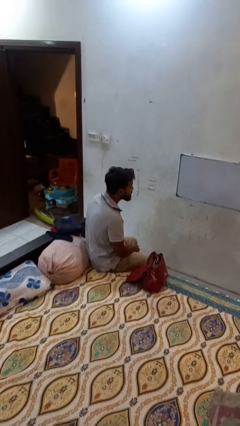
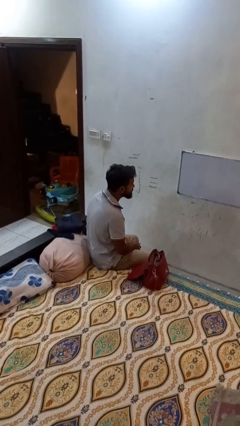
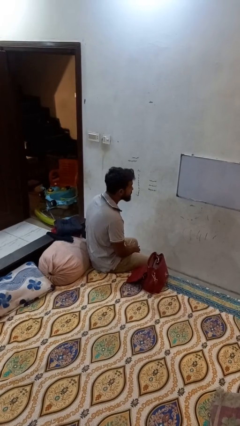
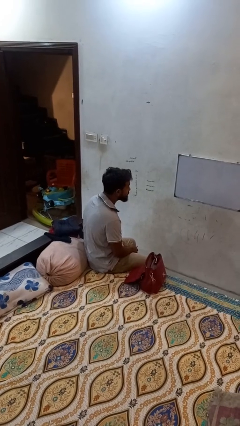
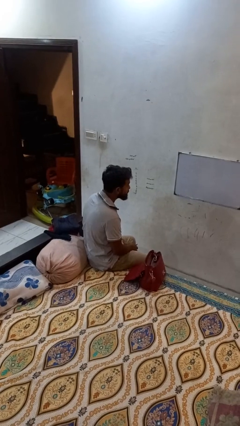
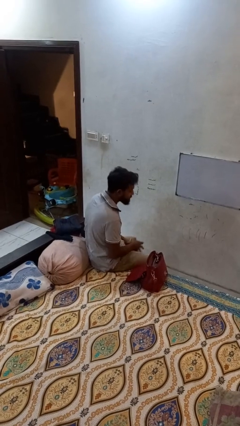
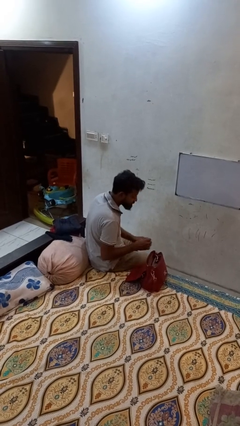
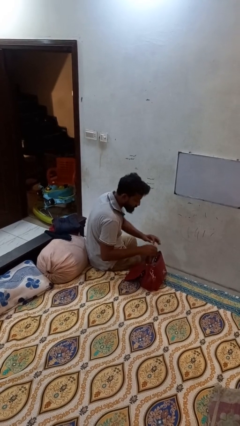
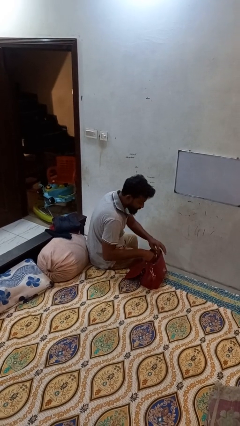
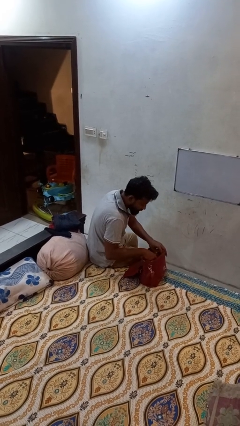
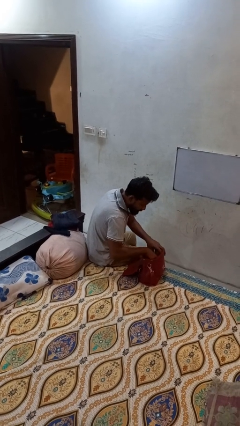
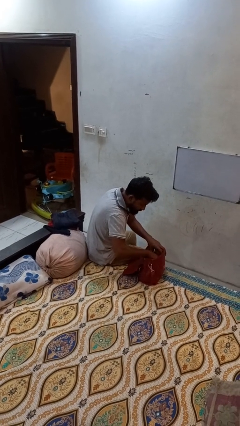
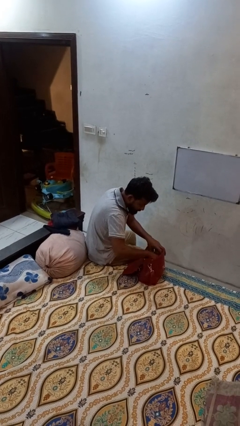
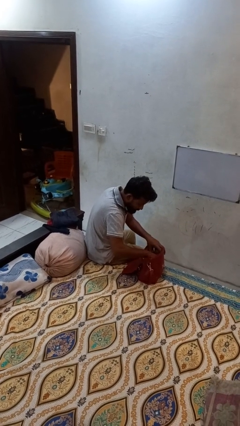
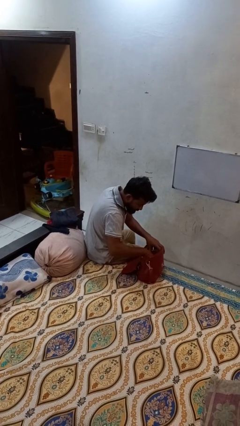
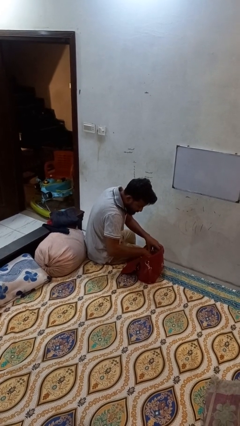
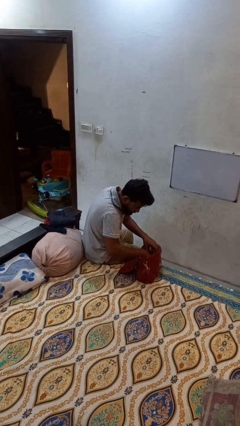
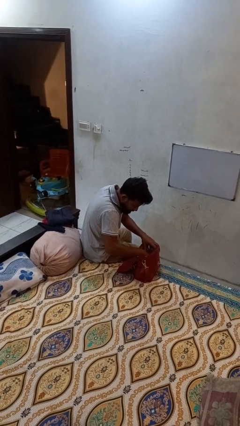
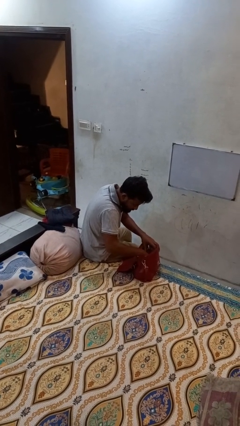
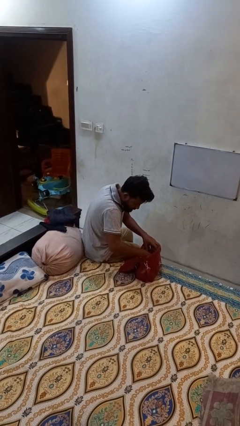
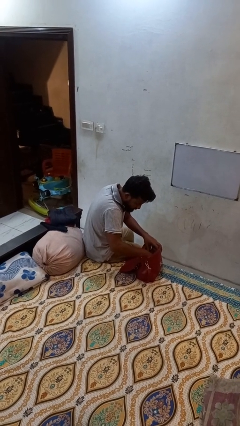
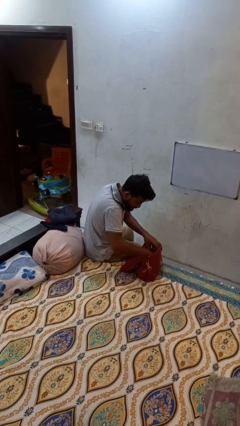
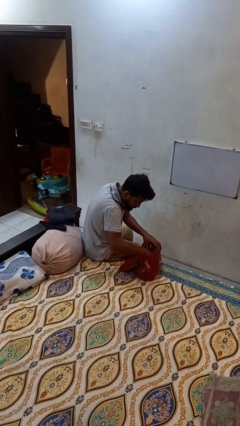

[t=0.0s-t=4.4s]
person searches in purse

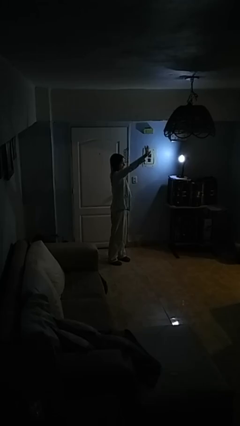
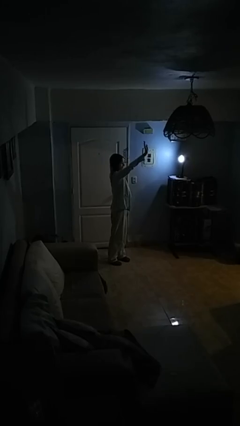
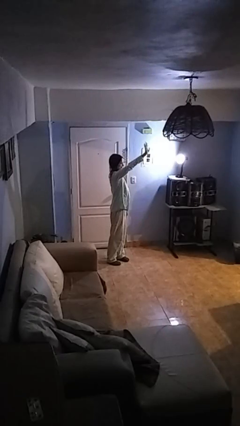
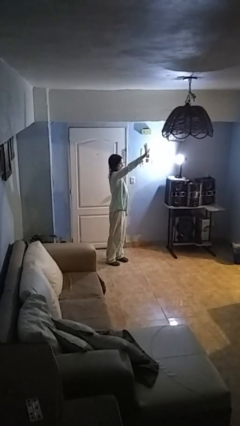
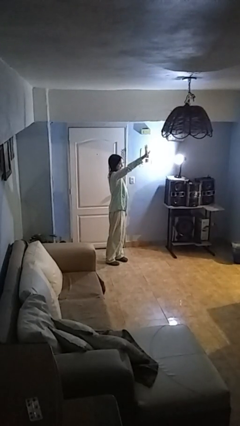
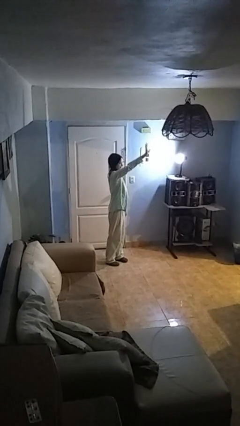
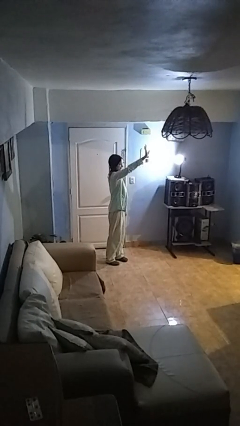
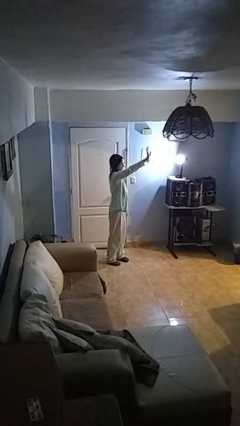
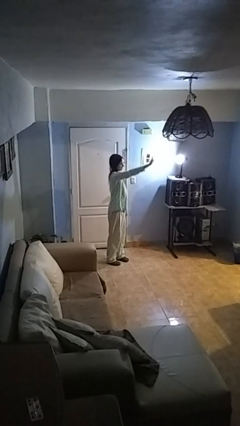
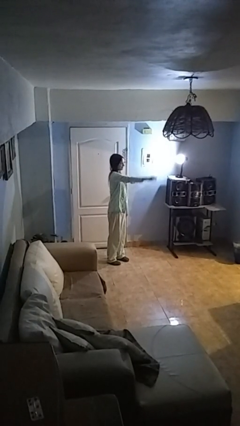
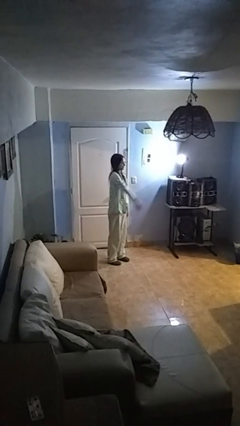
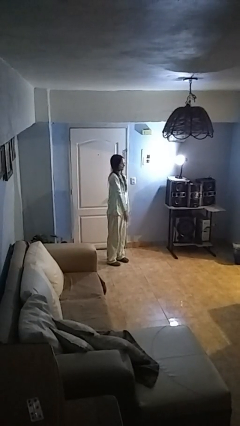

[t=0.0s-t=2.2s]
person waves at person

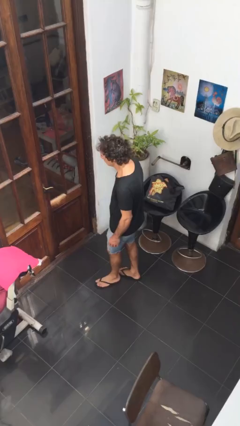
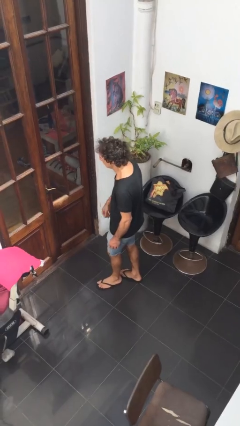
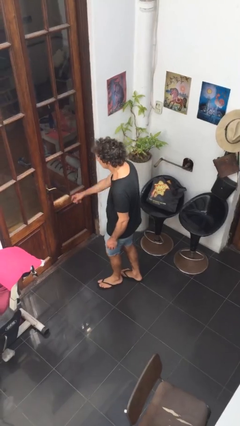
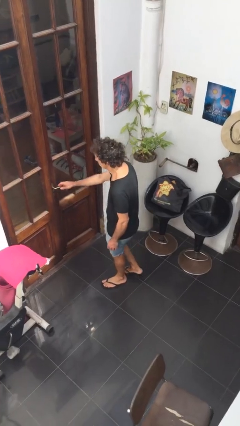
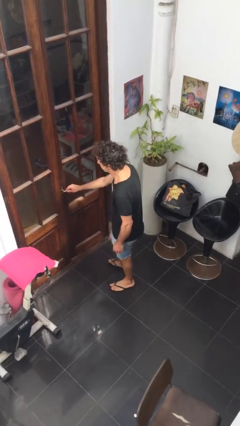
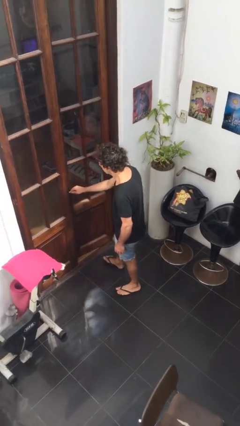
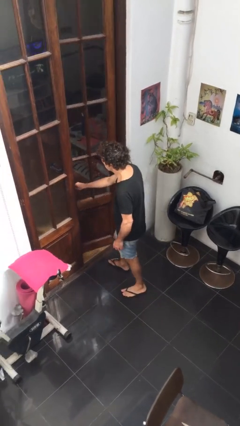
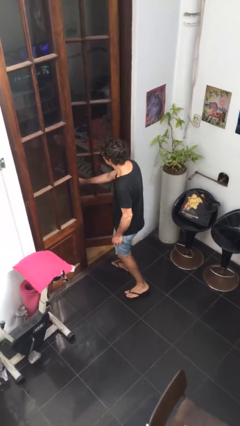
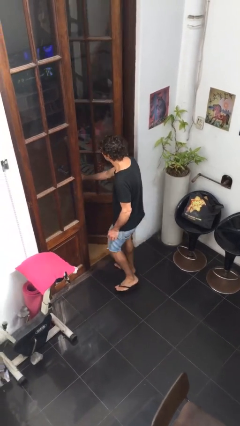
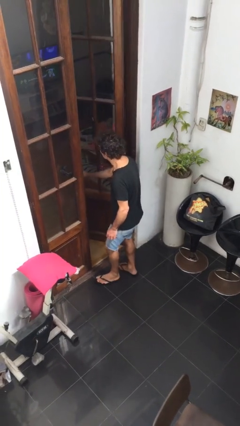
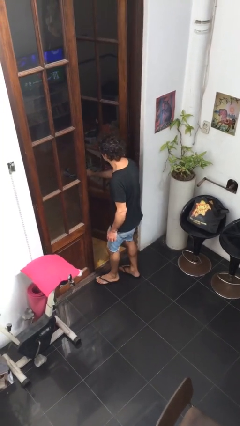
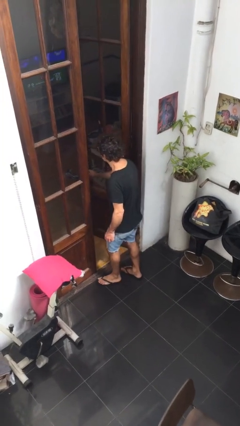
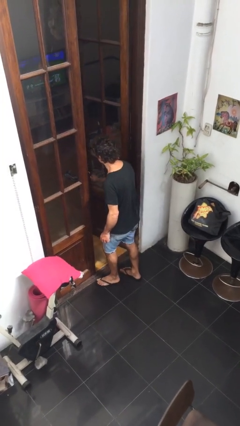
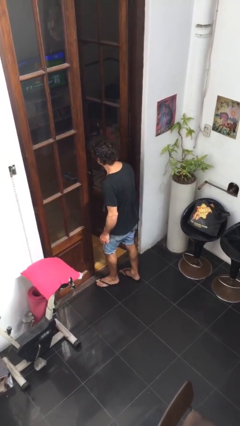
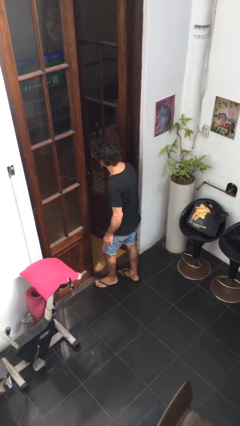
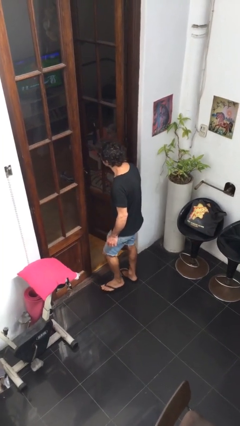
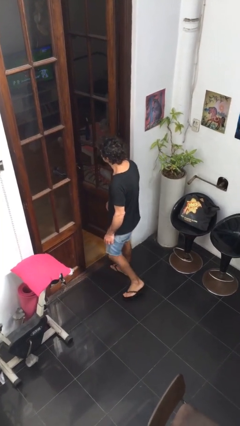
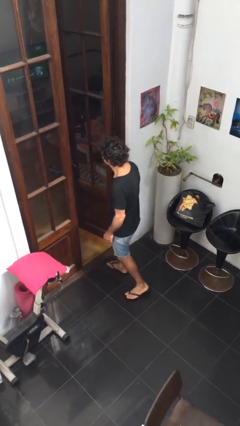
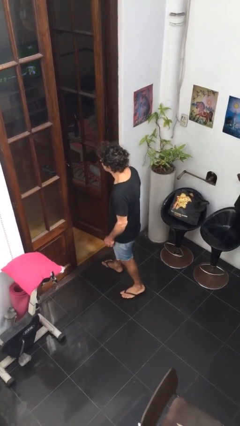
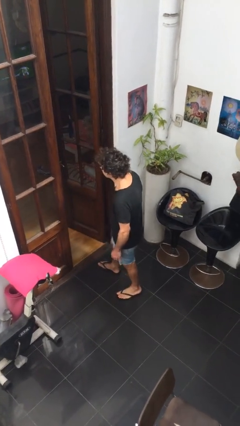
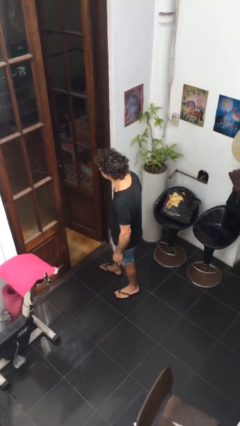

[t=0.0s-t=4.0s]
person opens facility door

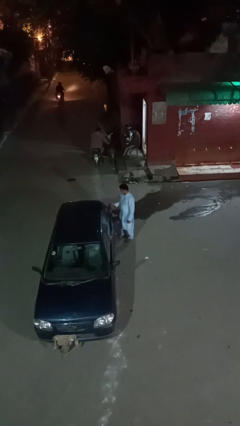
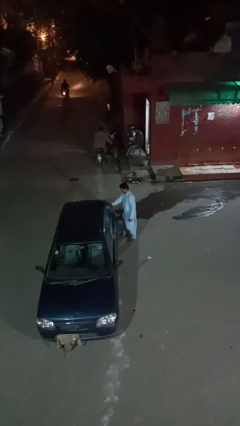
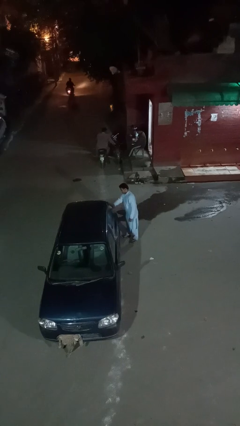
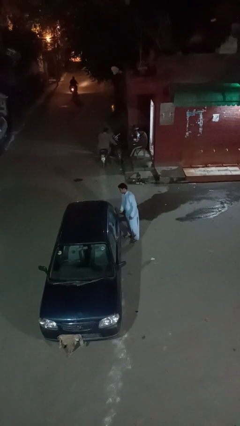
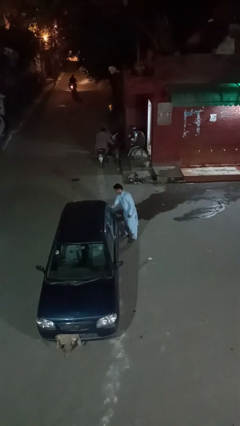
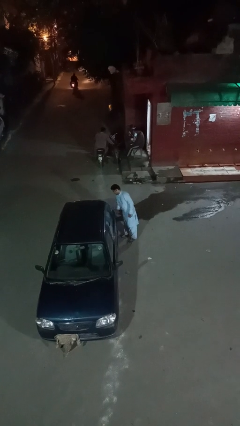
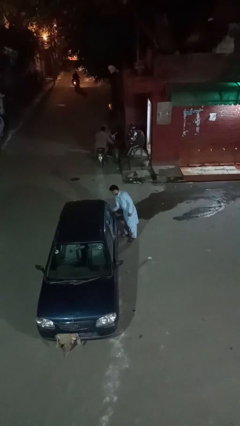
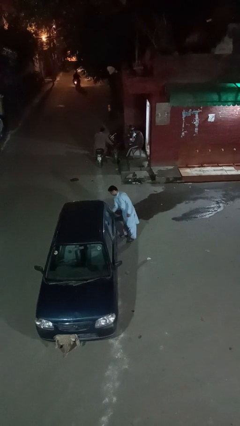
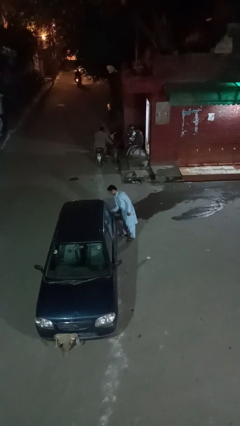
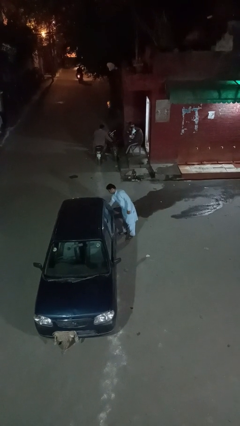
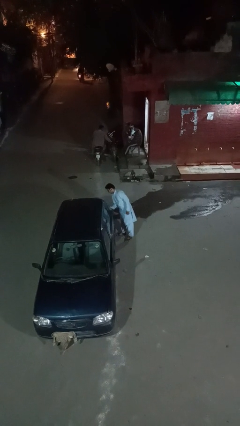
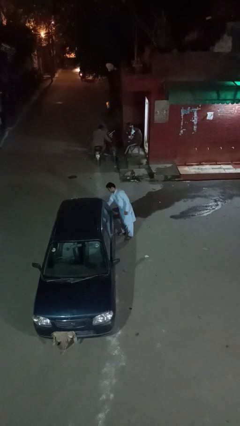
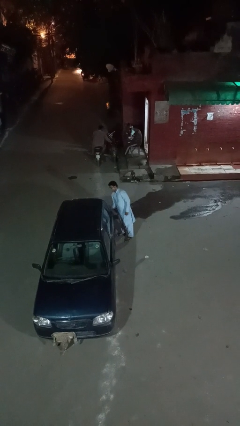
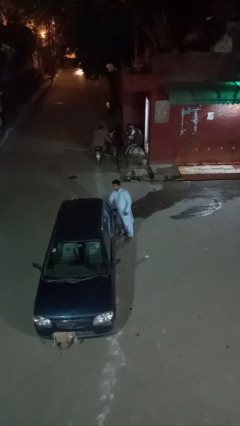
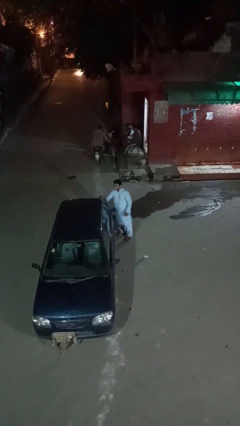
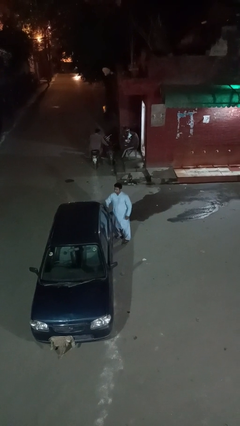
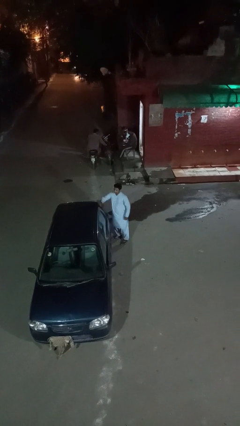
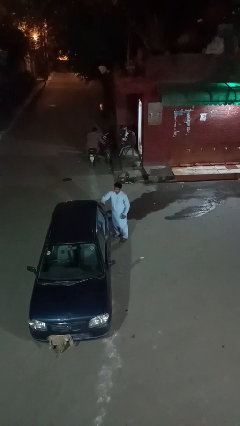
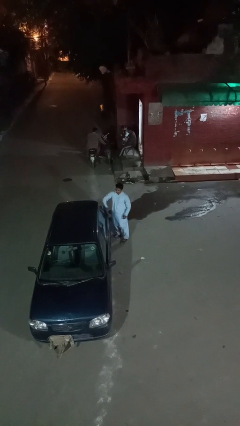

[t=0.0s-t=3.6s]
person polishes car with rag

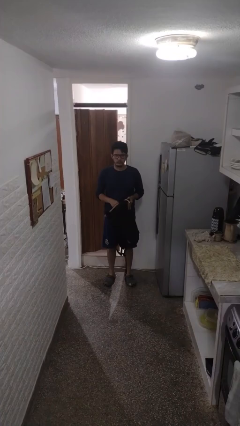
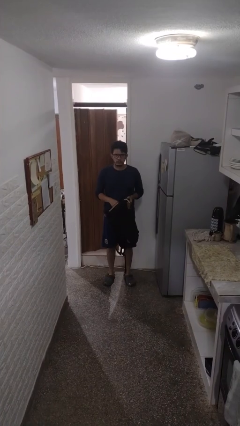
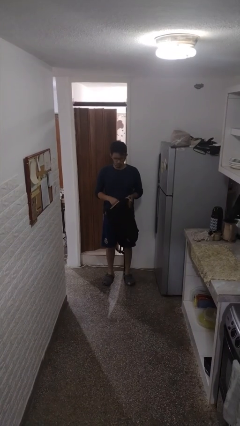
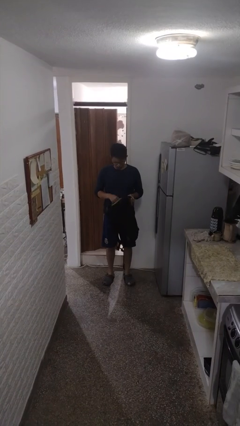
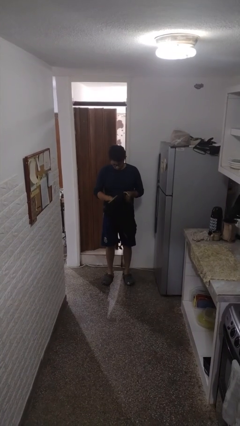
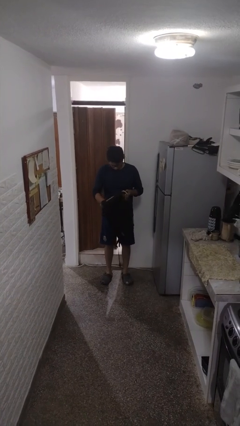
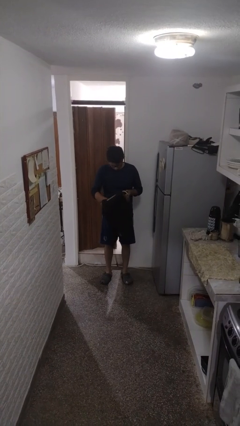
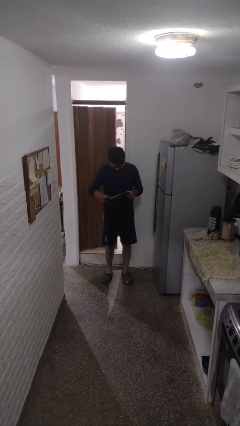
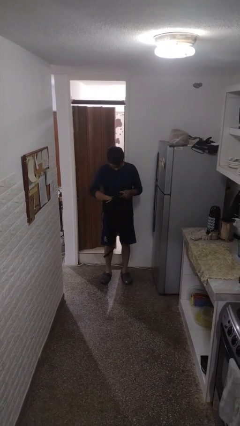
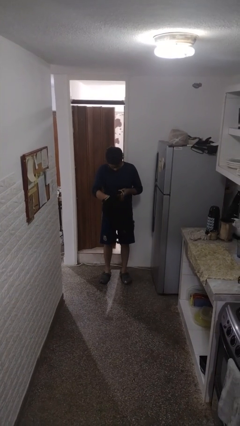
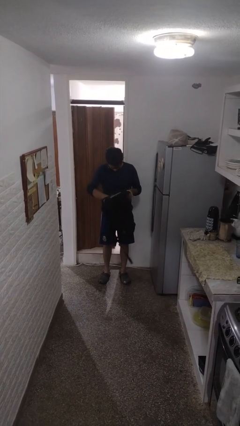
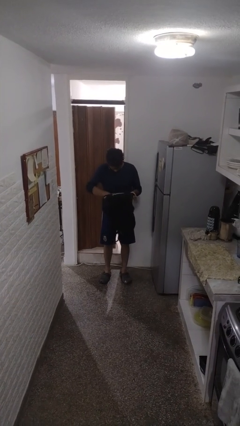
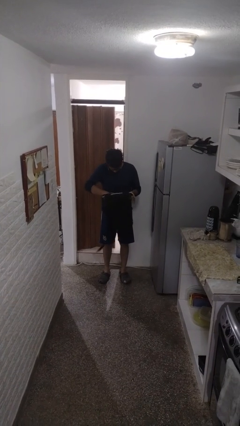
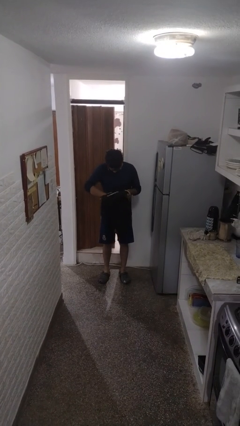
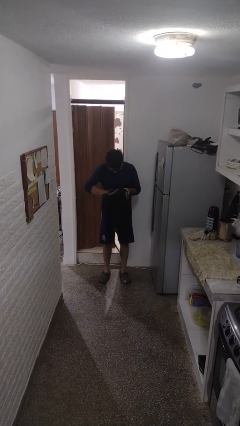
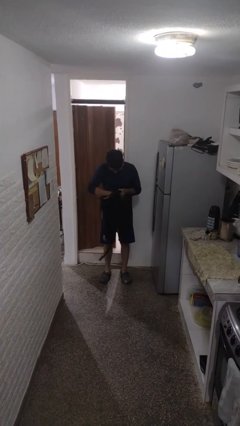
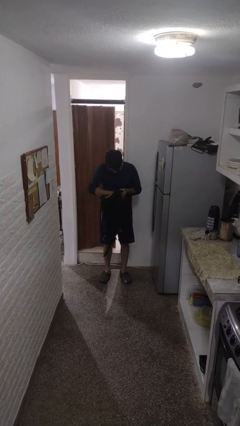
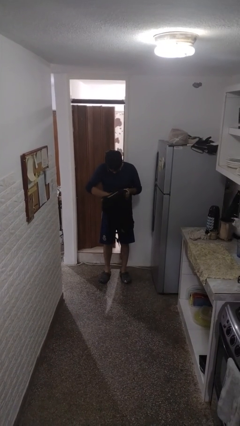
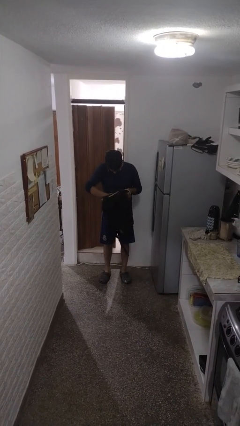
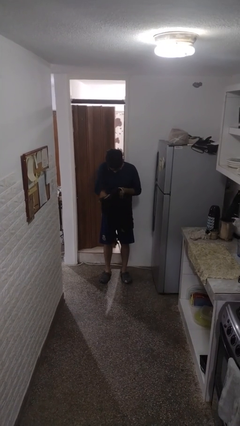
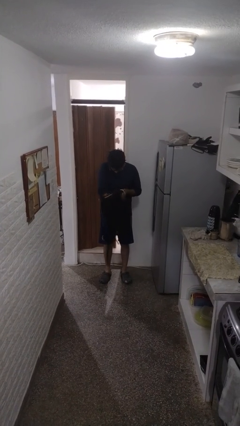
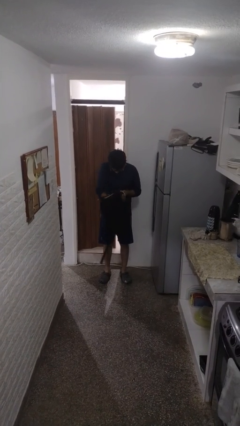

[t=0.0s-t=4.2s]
person searches in backpack
